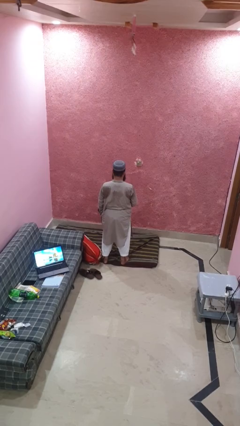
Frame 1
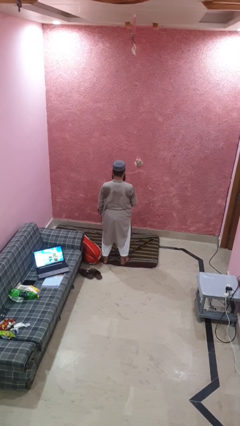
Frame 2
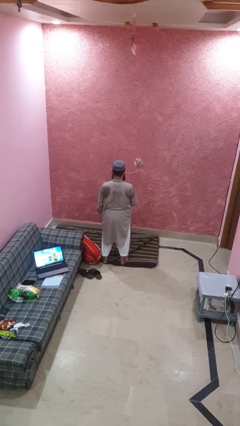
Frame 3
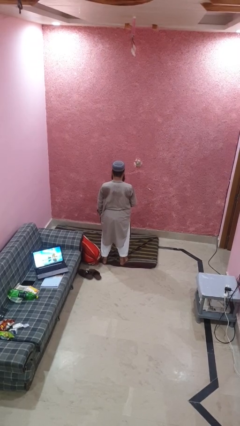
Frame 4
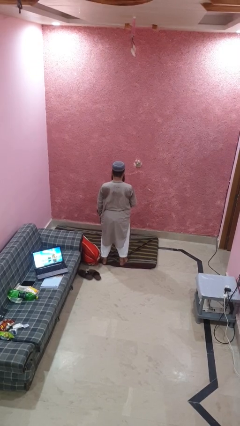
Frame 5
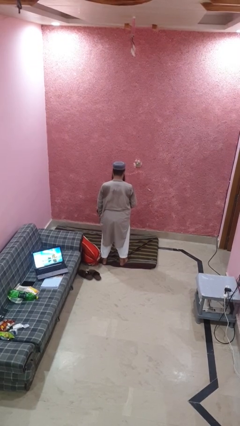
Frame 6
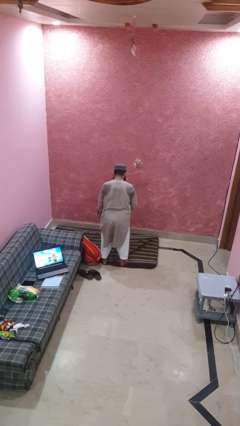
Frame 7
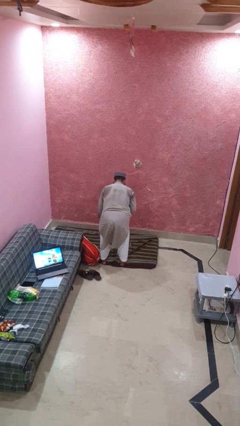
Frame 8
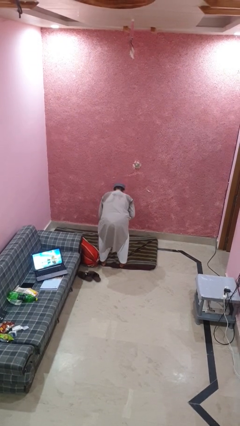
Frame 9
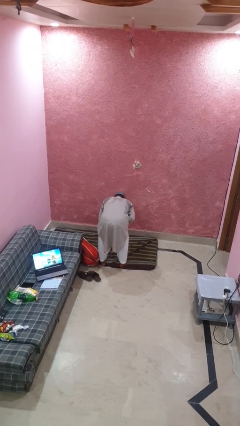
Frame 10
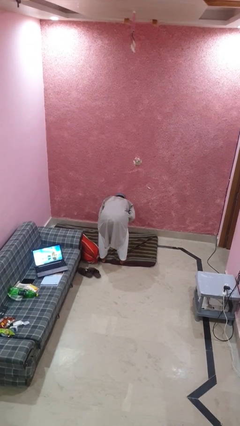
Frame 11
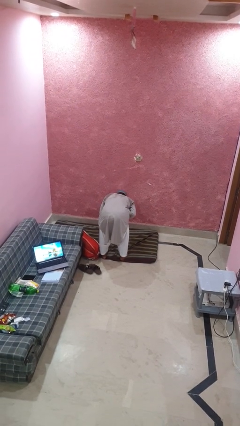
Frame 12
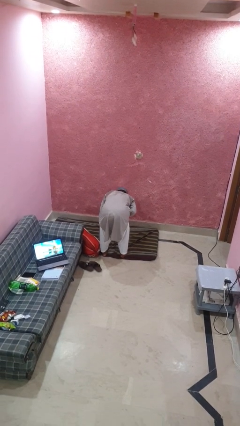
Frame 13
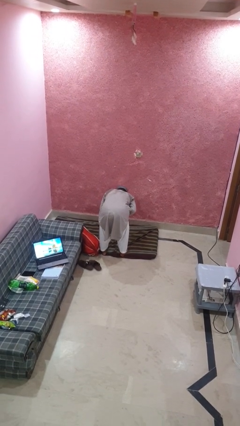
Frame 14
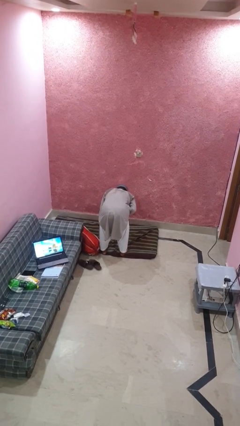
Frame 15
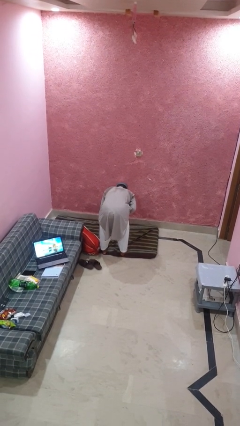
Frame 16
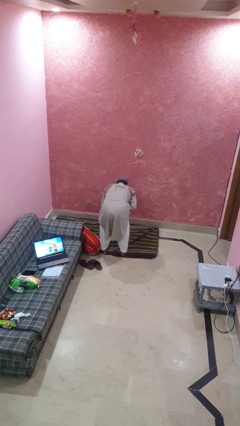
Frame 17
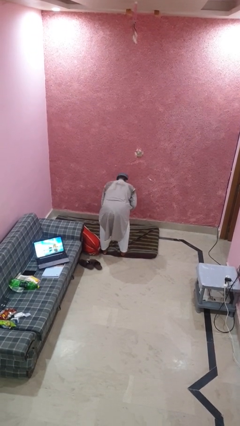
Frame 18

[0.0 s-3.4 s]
person bows

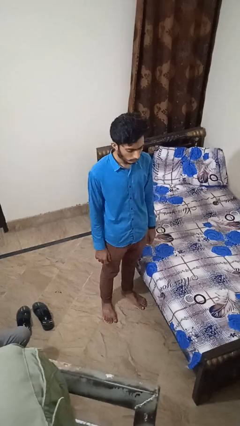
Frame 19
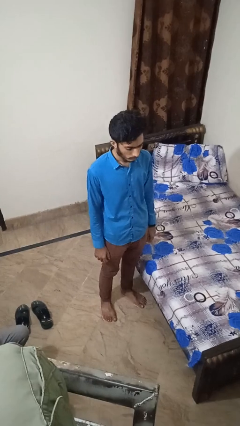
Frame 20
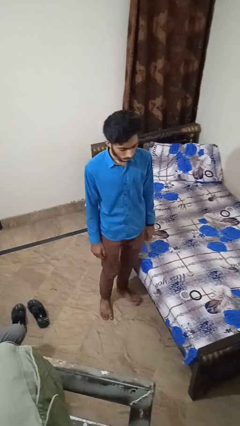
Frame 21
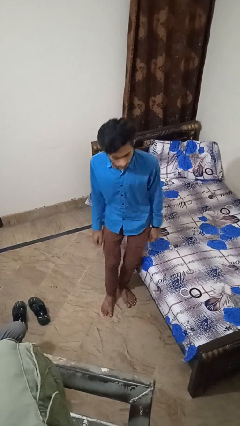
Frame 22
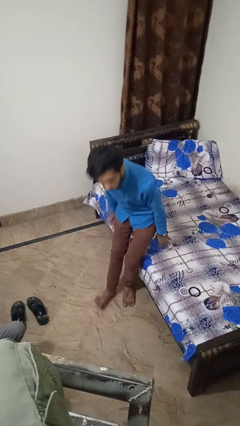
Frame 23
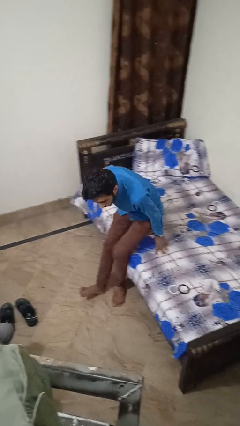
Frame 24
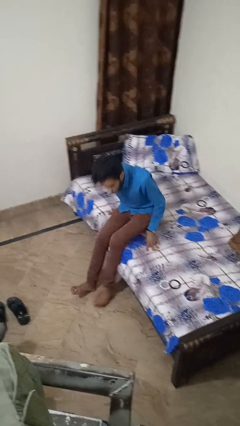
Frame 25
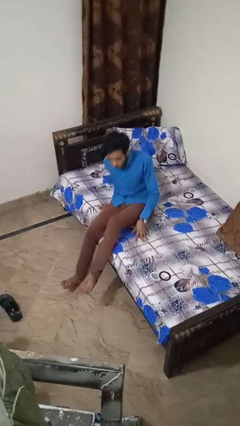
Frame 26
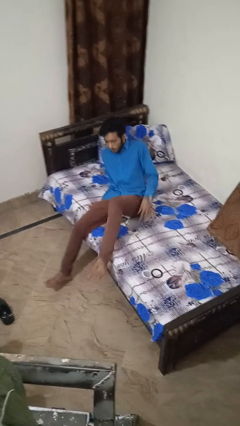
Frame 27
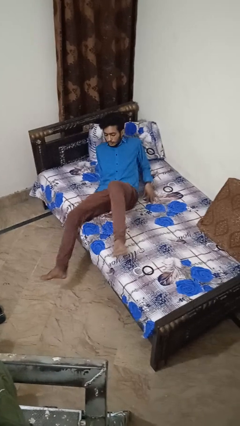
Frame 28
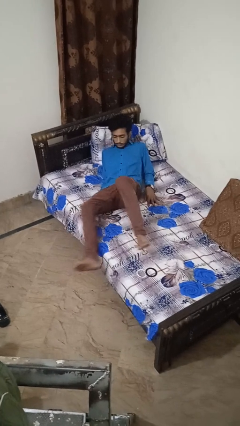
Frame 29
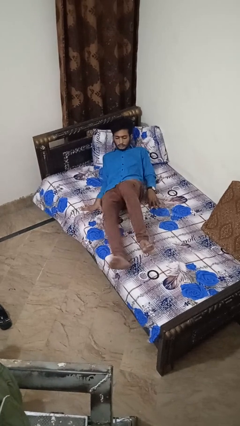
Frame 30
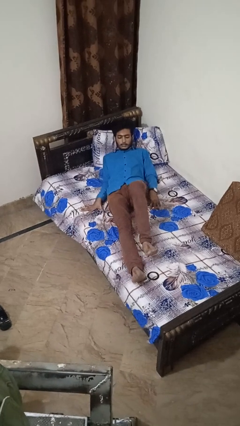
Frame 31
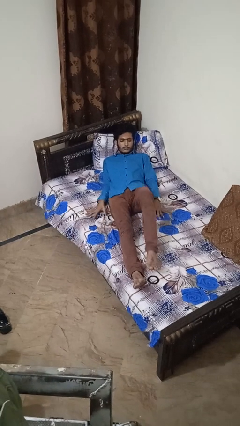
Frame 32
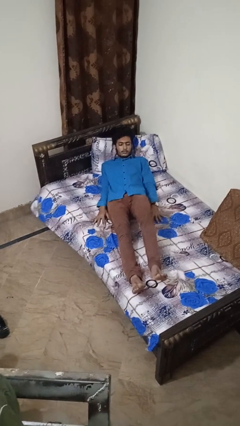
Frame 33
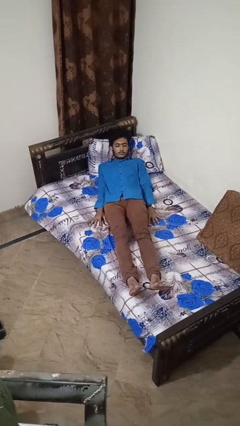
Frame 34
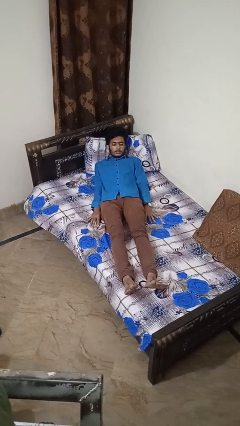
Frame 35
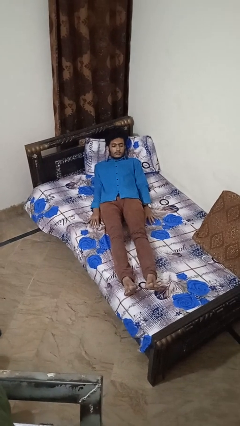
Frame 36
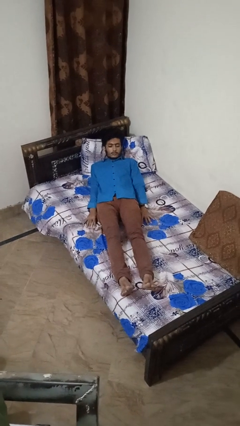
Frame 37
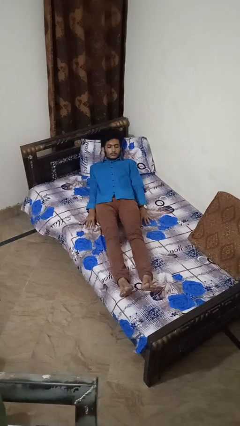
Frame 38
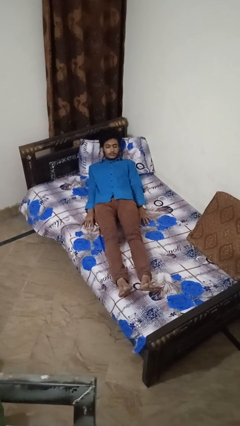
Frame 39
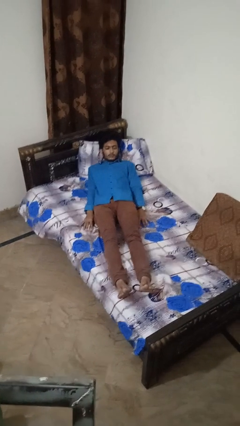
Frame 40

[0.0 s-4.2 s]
person lies down on bed

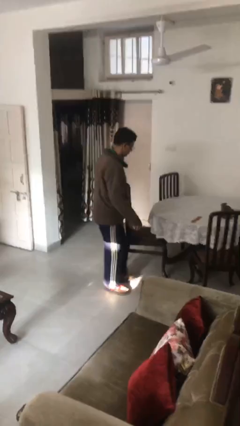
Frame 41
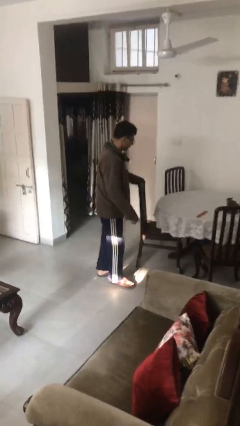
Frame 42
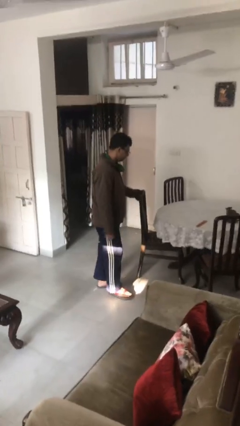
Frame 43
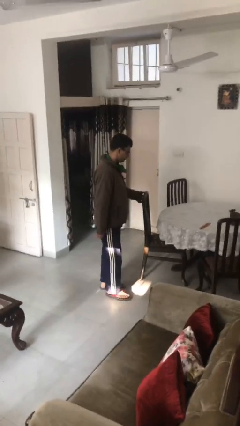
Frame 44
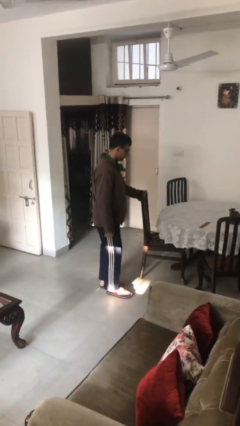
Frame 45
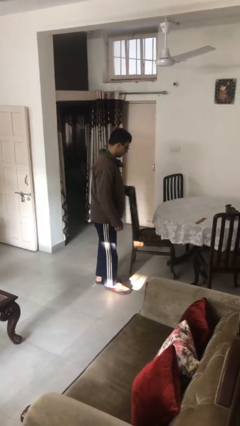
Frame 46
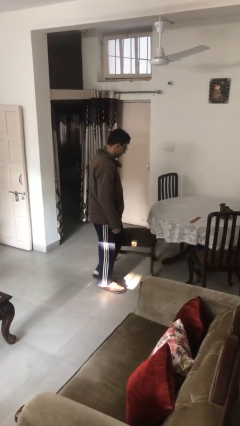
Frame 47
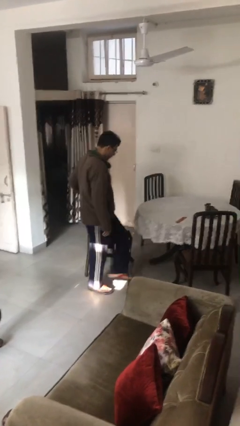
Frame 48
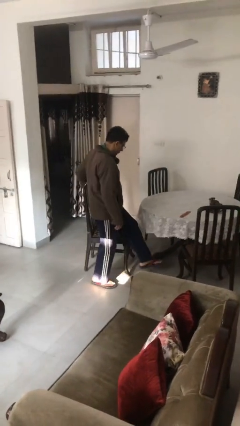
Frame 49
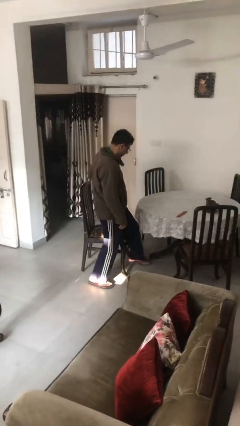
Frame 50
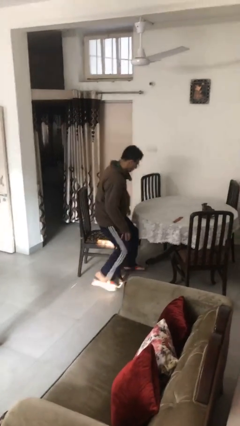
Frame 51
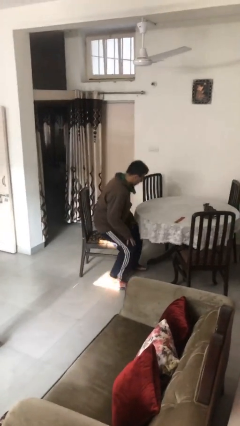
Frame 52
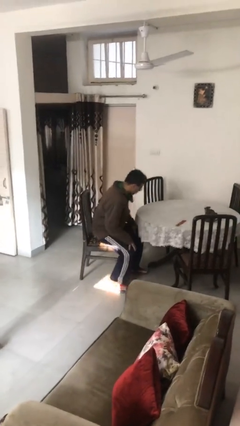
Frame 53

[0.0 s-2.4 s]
person sits down

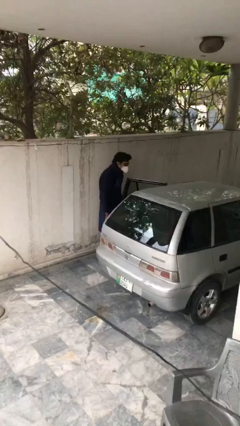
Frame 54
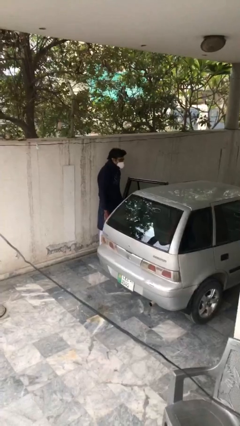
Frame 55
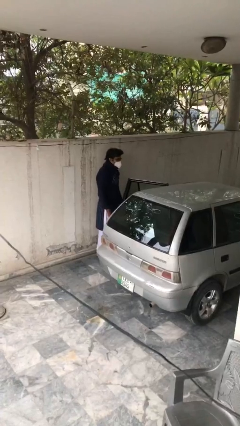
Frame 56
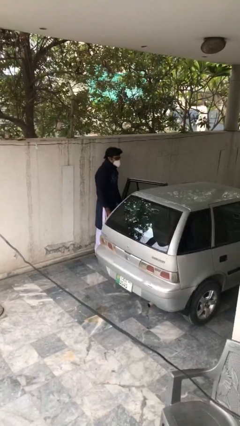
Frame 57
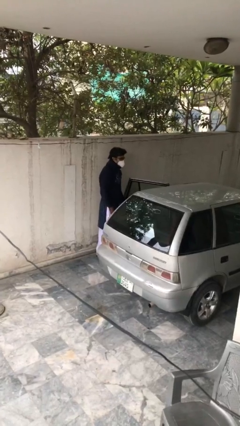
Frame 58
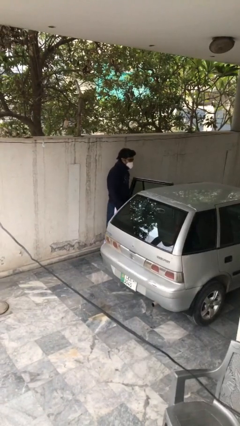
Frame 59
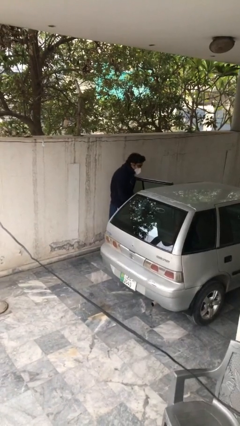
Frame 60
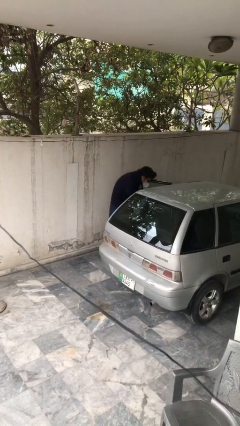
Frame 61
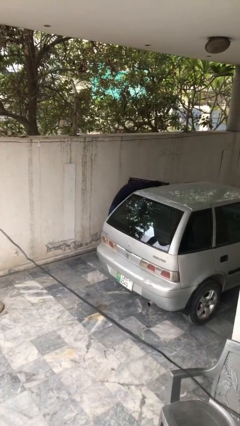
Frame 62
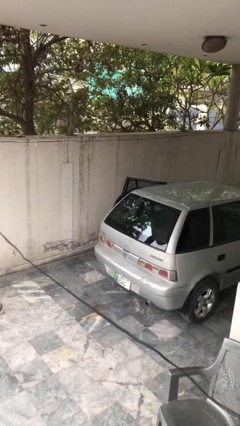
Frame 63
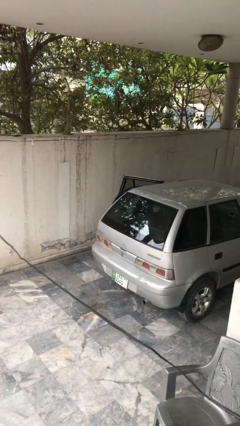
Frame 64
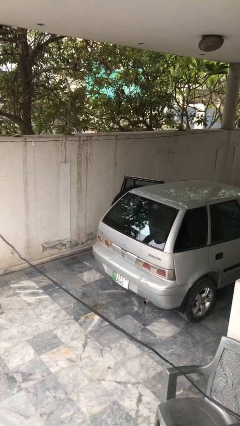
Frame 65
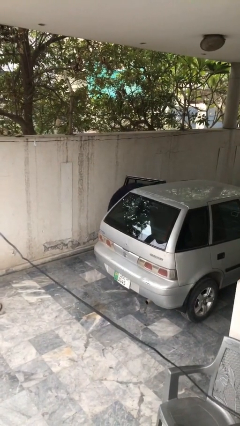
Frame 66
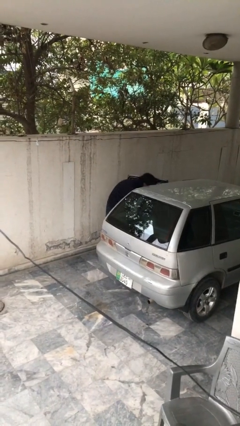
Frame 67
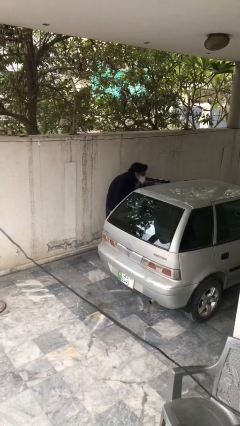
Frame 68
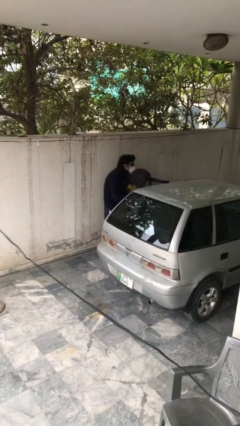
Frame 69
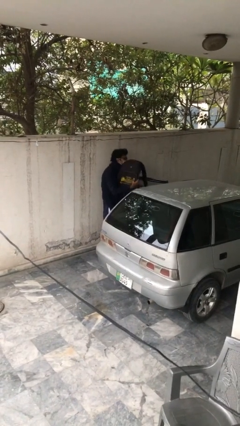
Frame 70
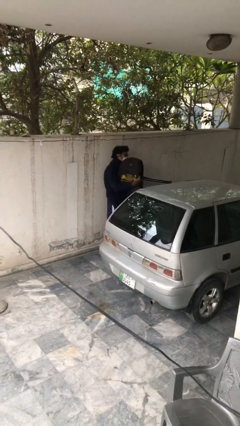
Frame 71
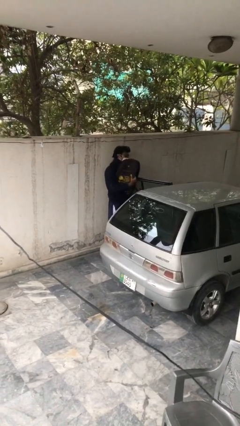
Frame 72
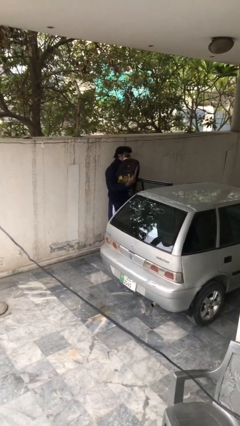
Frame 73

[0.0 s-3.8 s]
person unloads car

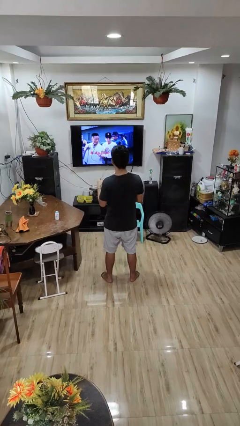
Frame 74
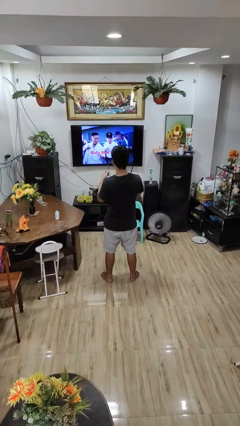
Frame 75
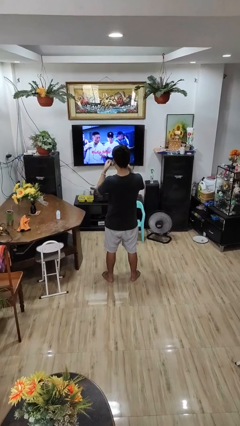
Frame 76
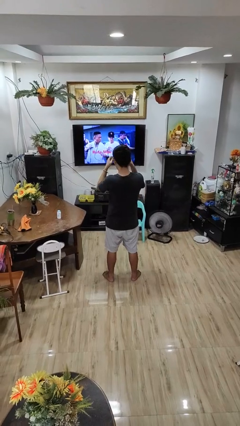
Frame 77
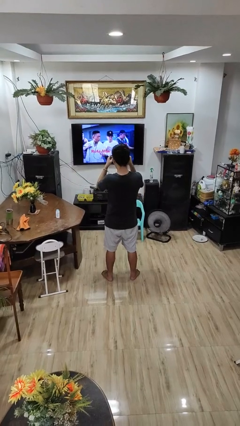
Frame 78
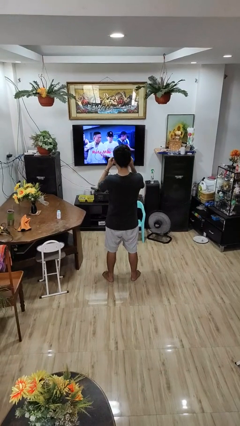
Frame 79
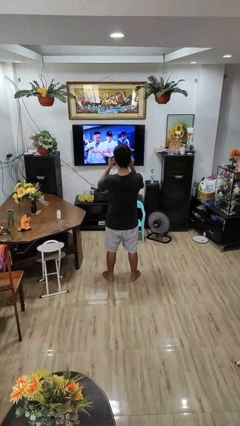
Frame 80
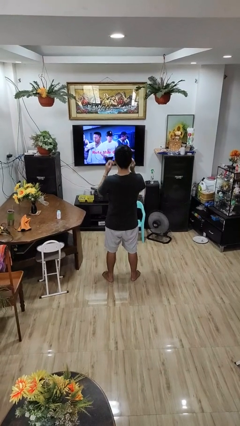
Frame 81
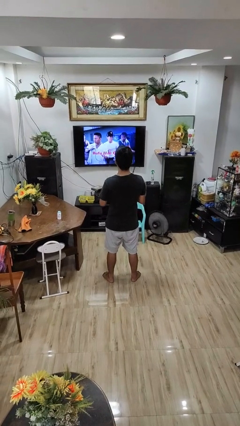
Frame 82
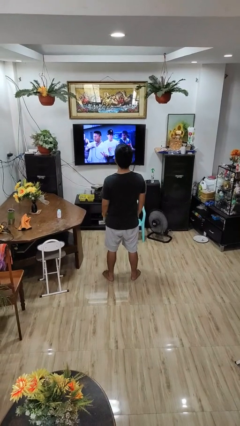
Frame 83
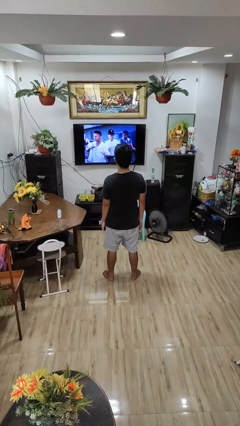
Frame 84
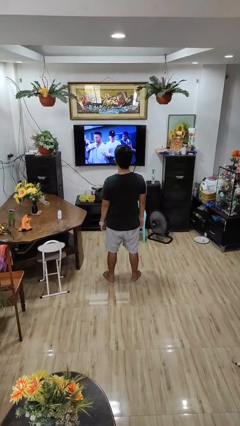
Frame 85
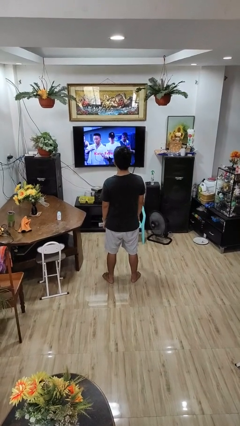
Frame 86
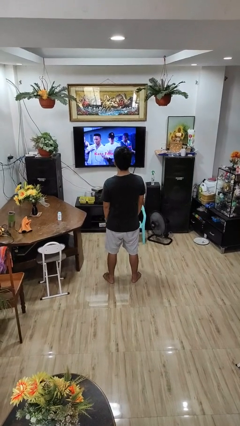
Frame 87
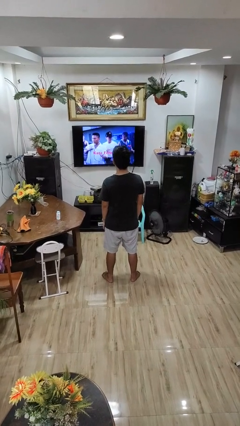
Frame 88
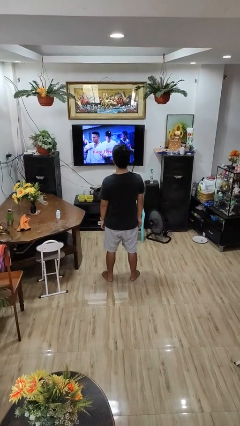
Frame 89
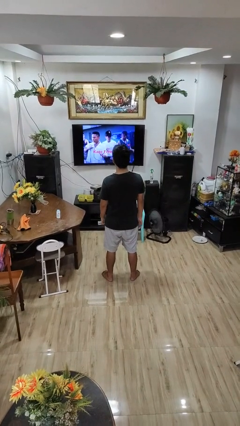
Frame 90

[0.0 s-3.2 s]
person puts on glasses

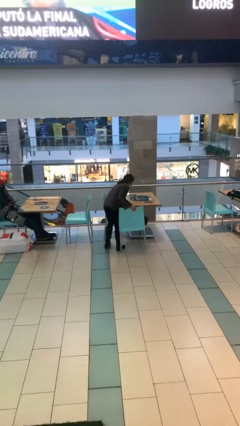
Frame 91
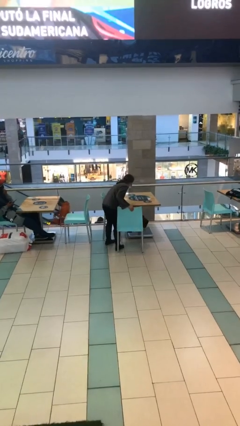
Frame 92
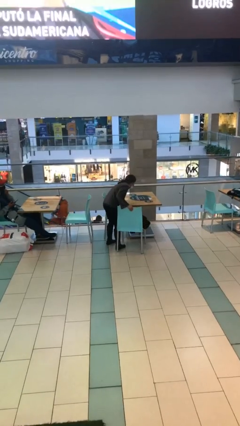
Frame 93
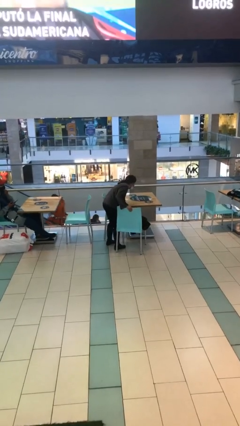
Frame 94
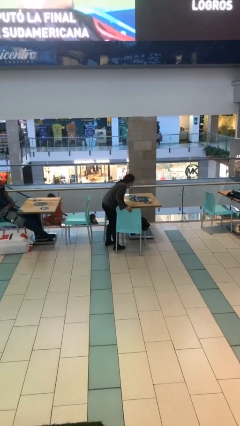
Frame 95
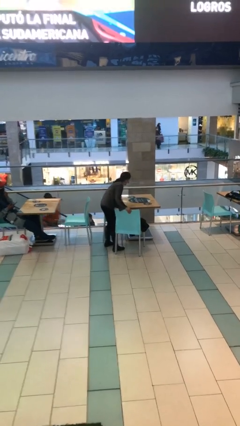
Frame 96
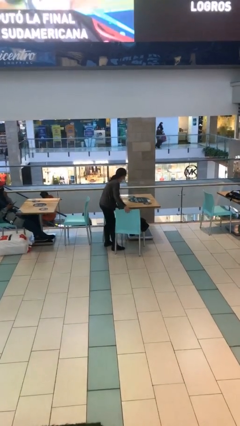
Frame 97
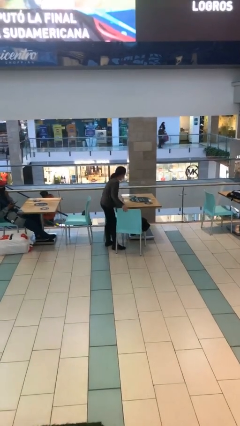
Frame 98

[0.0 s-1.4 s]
person puts down object on floor
